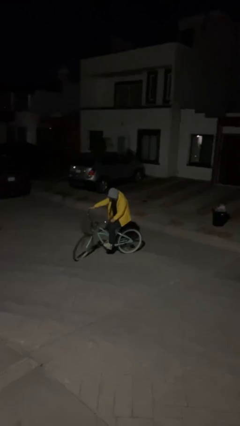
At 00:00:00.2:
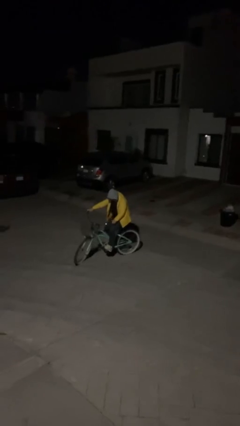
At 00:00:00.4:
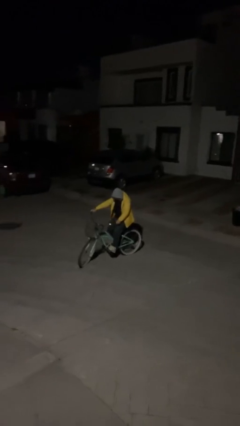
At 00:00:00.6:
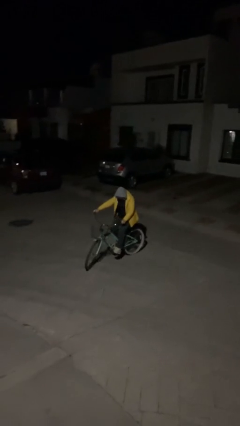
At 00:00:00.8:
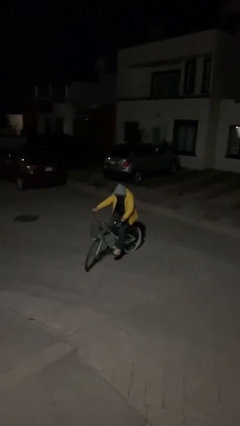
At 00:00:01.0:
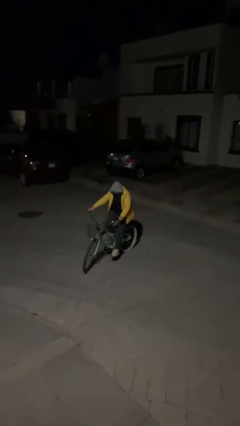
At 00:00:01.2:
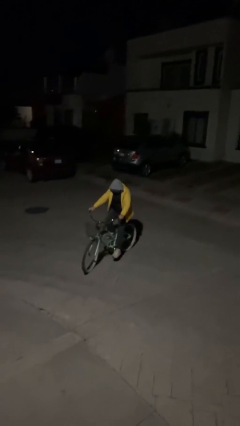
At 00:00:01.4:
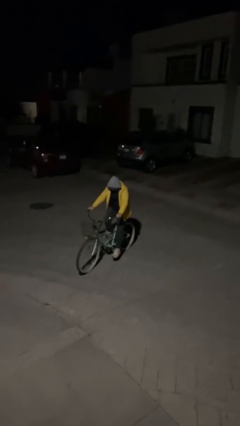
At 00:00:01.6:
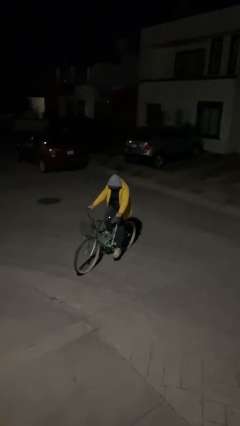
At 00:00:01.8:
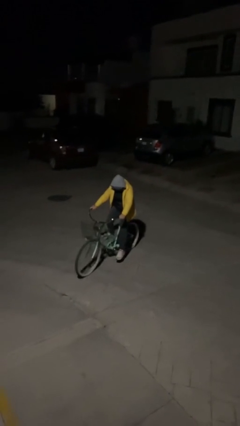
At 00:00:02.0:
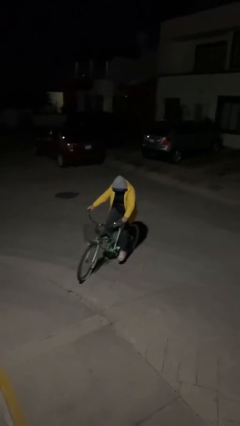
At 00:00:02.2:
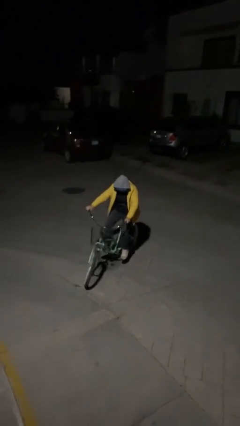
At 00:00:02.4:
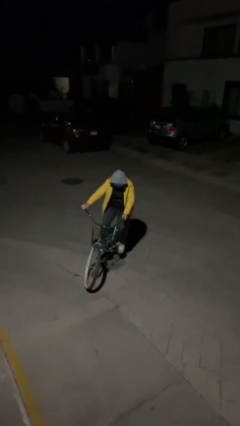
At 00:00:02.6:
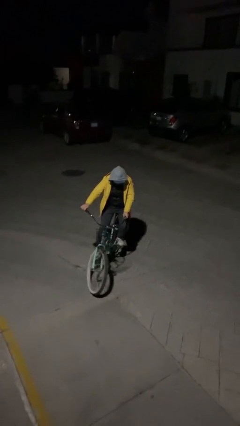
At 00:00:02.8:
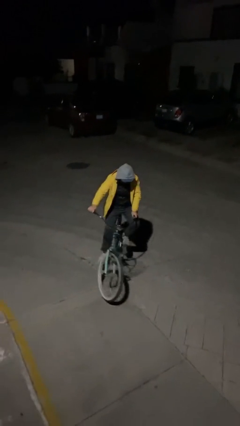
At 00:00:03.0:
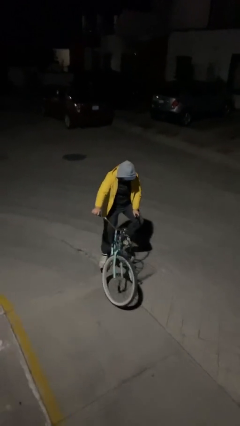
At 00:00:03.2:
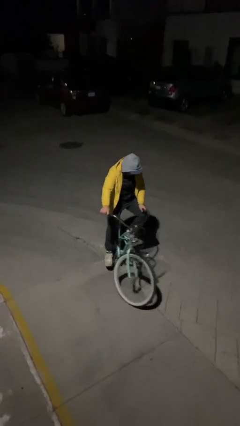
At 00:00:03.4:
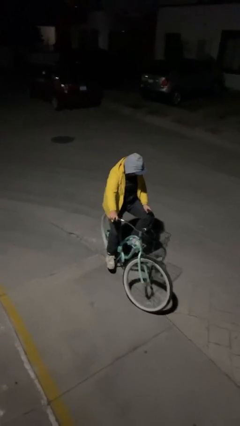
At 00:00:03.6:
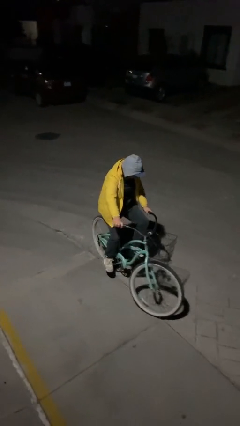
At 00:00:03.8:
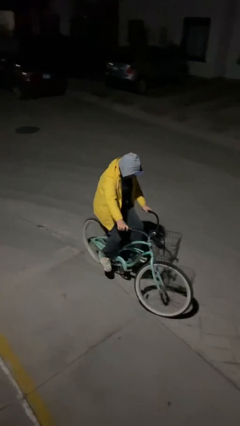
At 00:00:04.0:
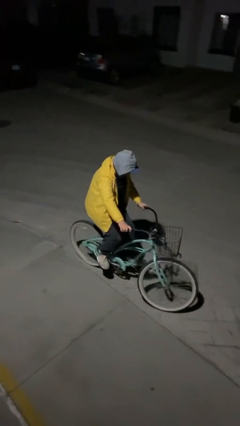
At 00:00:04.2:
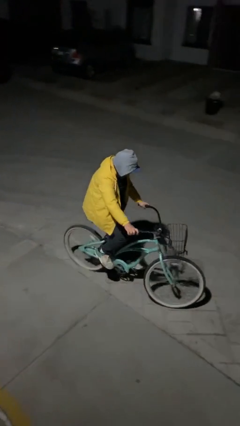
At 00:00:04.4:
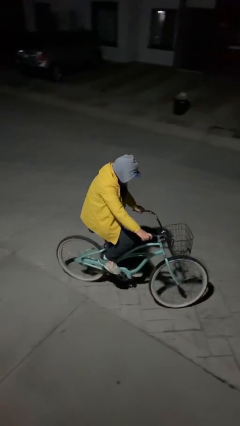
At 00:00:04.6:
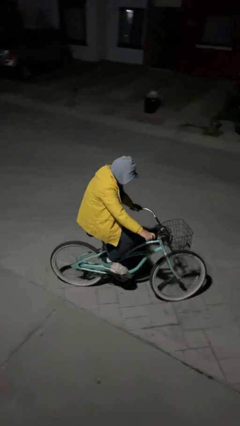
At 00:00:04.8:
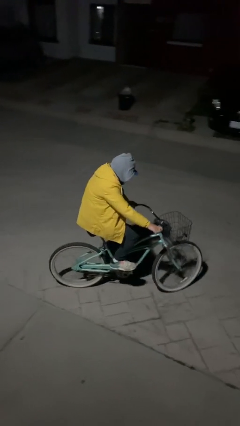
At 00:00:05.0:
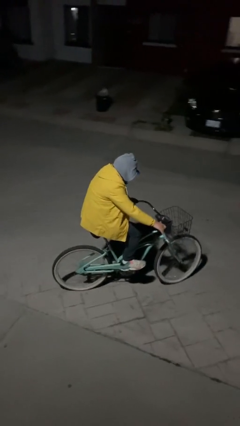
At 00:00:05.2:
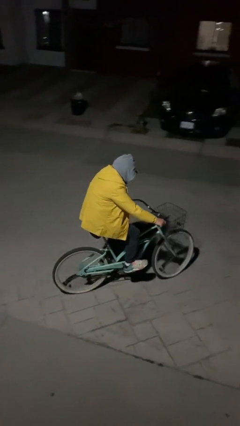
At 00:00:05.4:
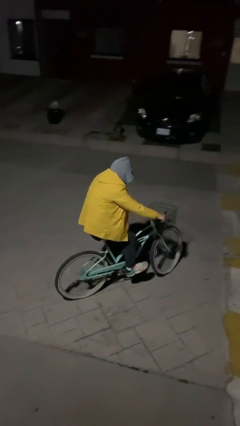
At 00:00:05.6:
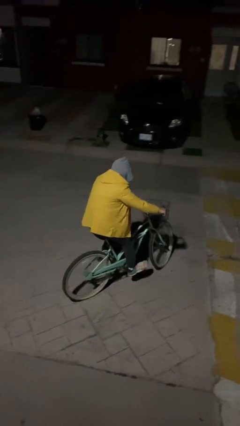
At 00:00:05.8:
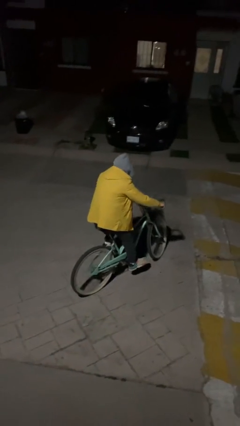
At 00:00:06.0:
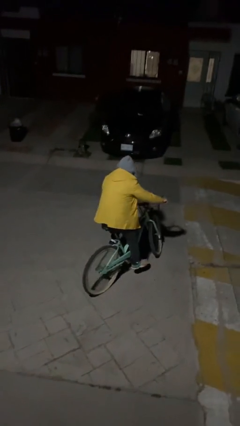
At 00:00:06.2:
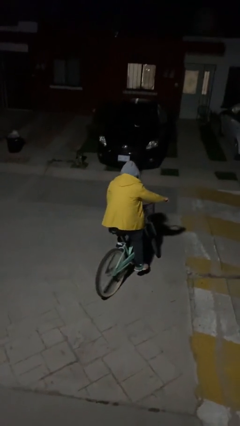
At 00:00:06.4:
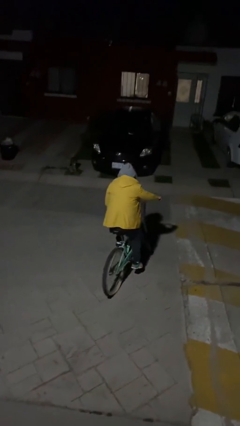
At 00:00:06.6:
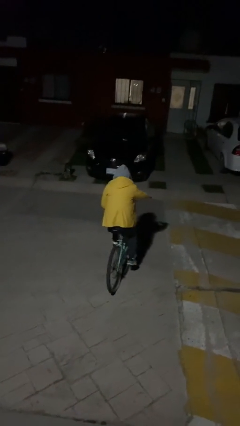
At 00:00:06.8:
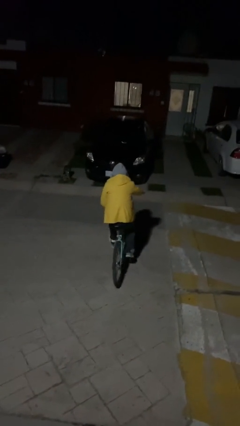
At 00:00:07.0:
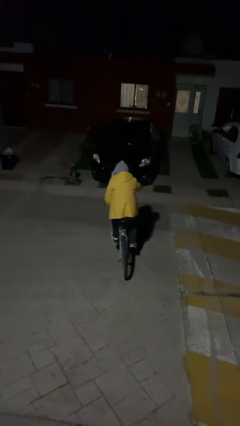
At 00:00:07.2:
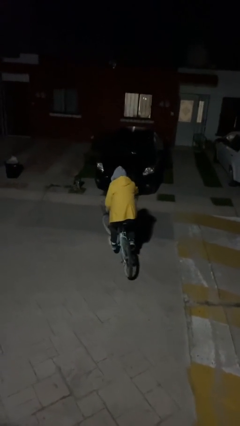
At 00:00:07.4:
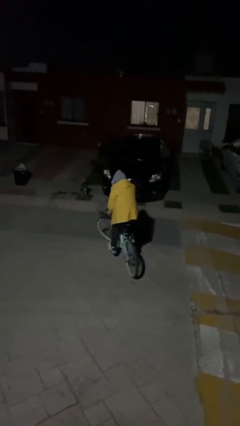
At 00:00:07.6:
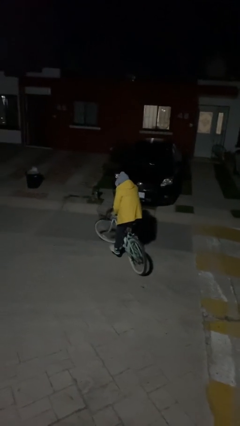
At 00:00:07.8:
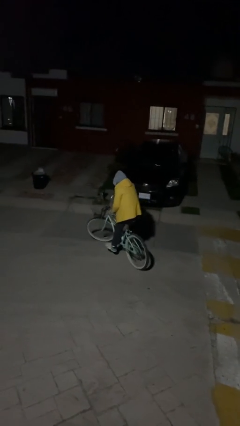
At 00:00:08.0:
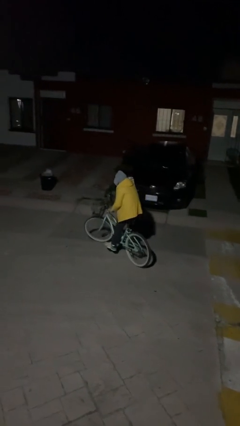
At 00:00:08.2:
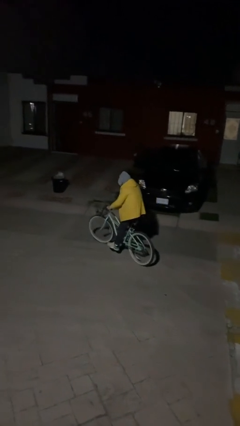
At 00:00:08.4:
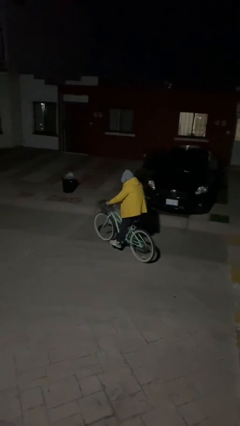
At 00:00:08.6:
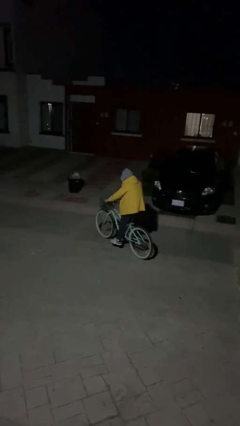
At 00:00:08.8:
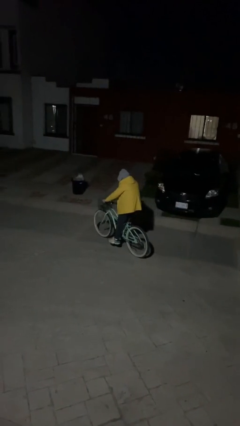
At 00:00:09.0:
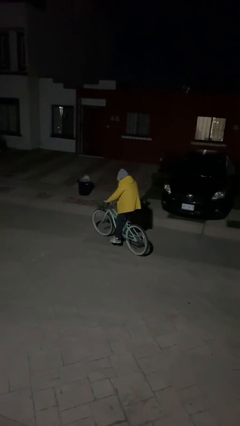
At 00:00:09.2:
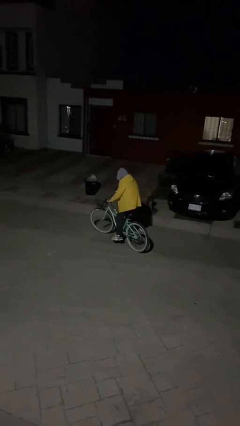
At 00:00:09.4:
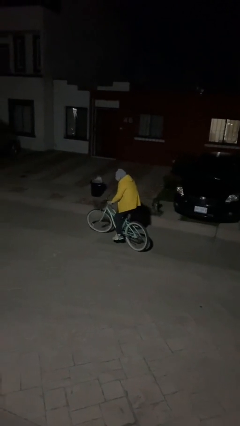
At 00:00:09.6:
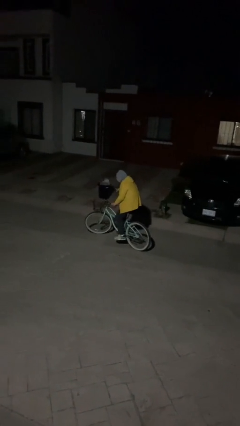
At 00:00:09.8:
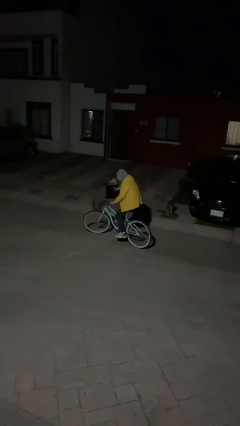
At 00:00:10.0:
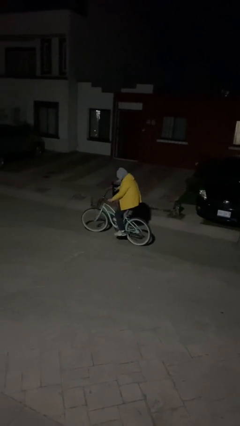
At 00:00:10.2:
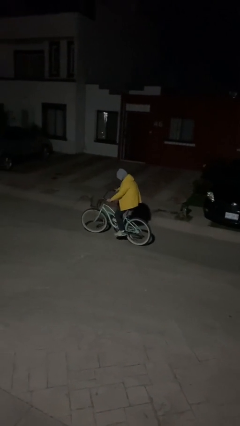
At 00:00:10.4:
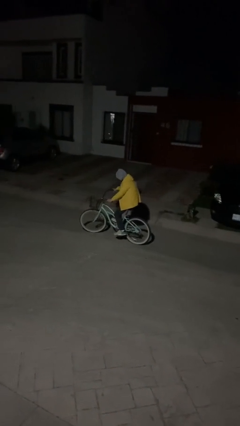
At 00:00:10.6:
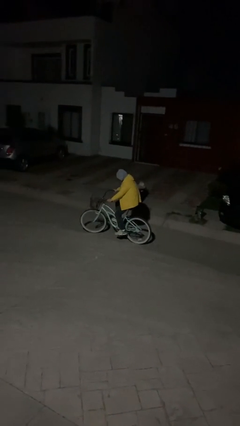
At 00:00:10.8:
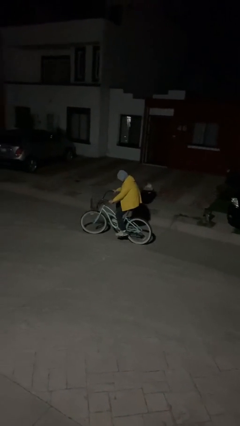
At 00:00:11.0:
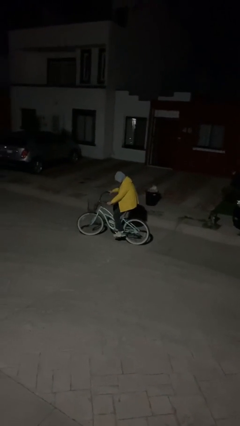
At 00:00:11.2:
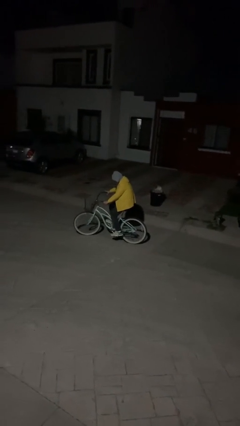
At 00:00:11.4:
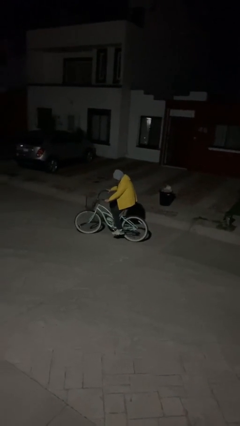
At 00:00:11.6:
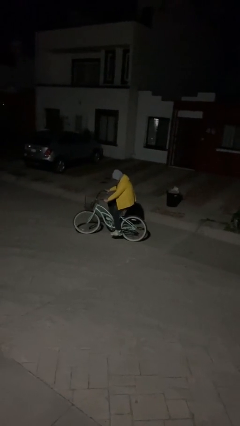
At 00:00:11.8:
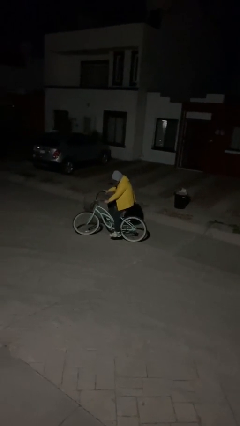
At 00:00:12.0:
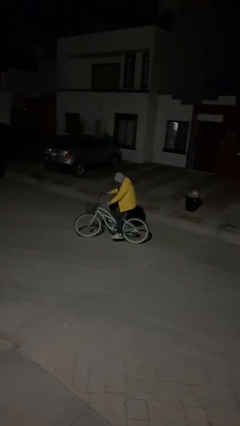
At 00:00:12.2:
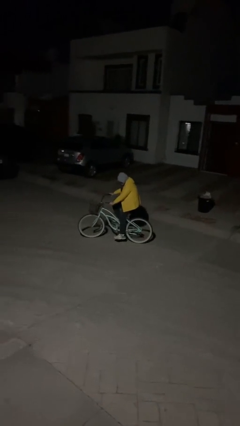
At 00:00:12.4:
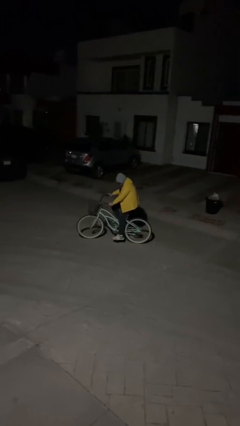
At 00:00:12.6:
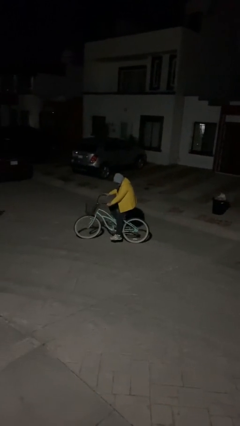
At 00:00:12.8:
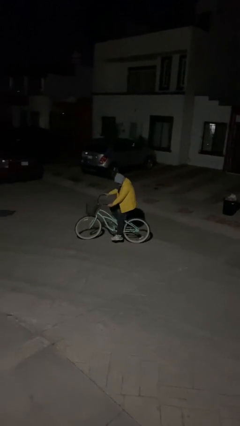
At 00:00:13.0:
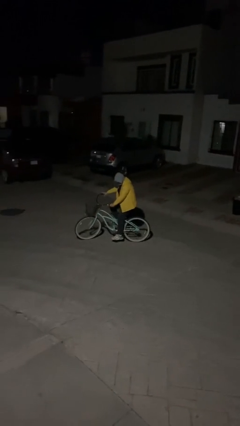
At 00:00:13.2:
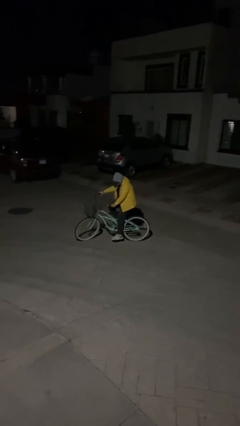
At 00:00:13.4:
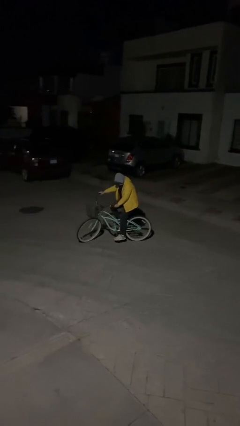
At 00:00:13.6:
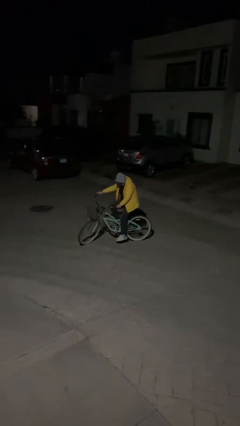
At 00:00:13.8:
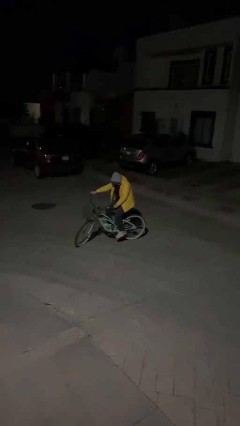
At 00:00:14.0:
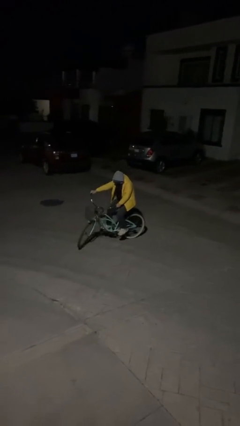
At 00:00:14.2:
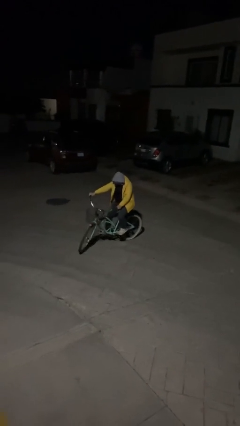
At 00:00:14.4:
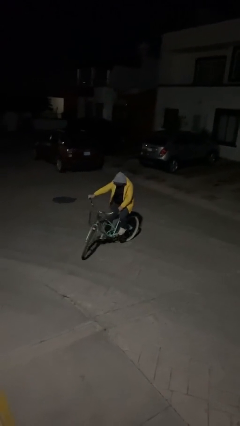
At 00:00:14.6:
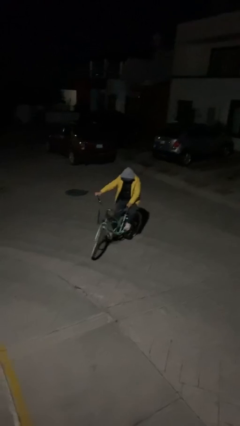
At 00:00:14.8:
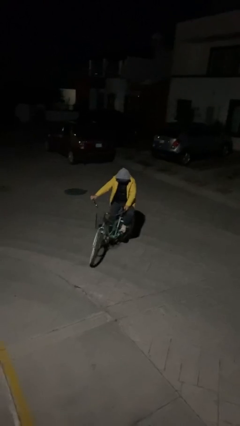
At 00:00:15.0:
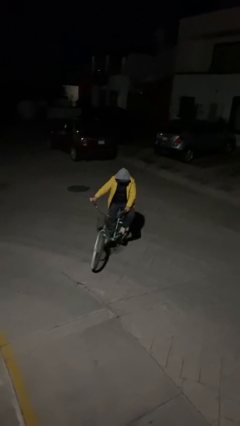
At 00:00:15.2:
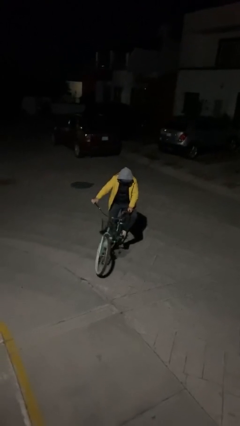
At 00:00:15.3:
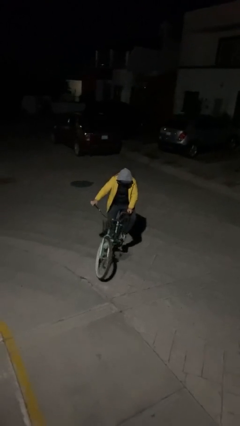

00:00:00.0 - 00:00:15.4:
person rides bicycle

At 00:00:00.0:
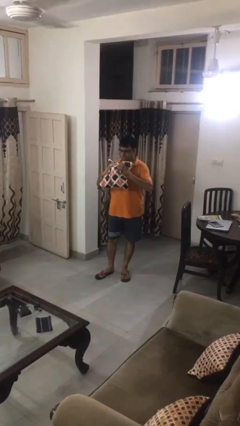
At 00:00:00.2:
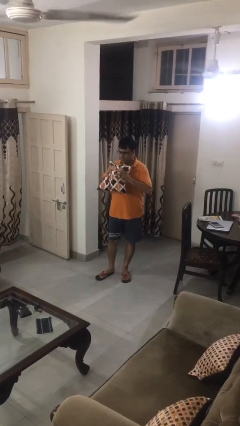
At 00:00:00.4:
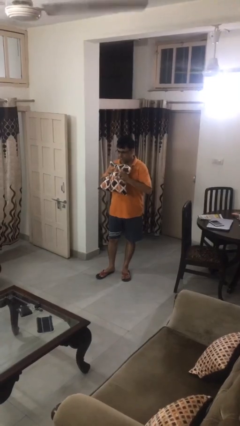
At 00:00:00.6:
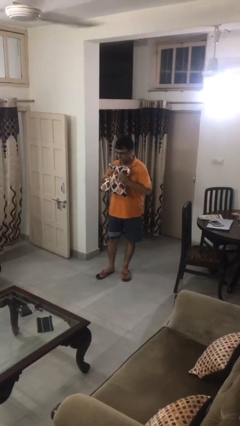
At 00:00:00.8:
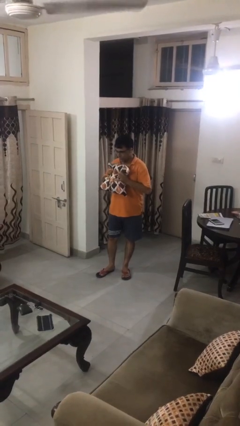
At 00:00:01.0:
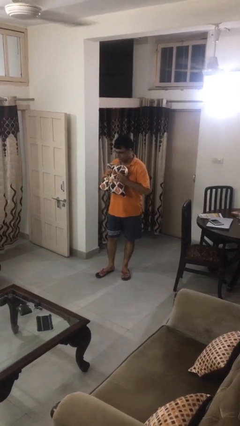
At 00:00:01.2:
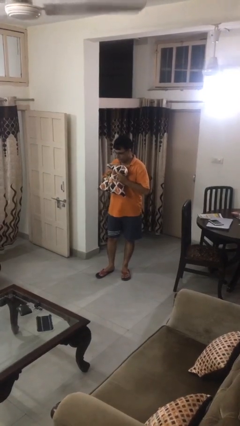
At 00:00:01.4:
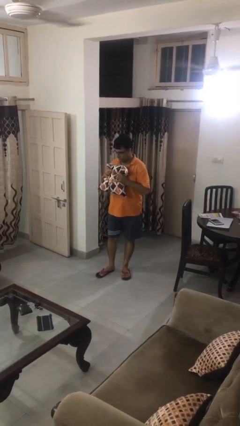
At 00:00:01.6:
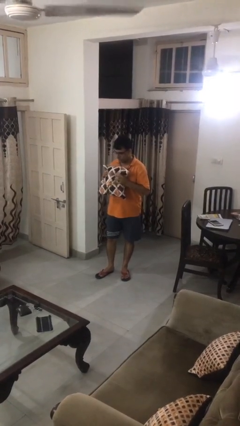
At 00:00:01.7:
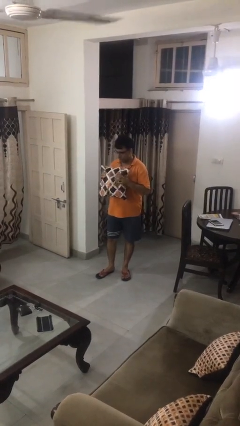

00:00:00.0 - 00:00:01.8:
person squeezes object

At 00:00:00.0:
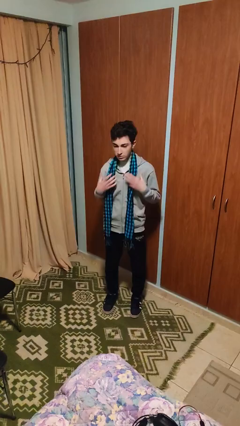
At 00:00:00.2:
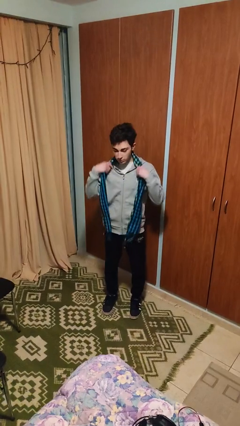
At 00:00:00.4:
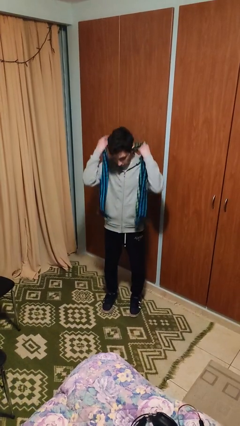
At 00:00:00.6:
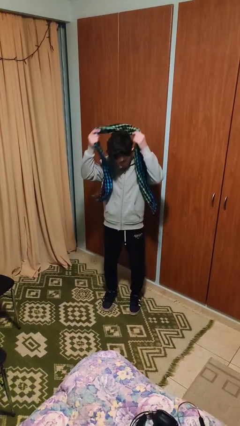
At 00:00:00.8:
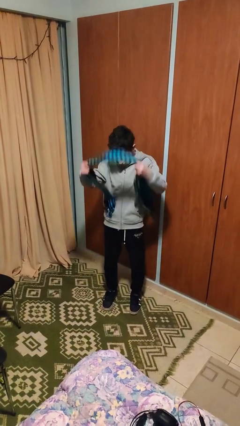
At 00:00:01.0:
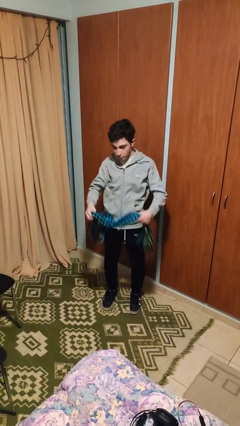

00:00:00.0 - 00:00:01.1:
person takes off scarf
